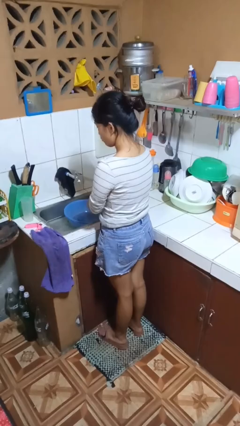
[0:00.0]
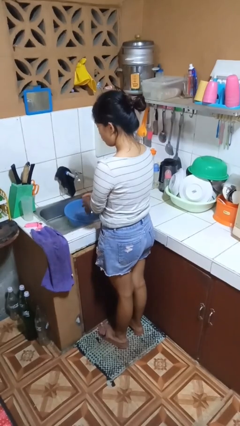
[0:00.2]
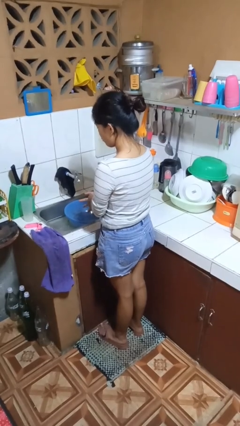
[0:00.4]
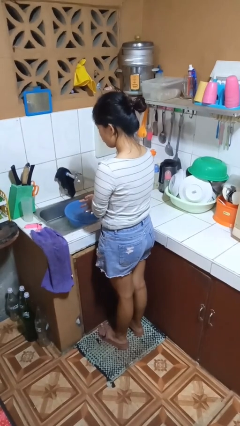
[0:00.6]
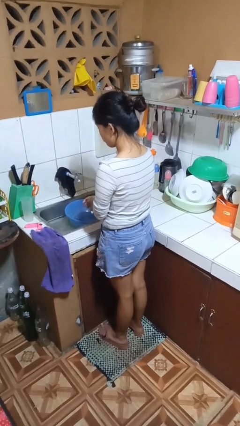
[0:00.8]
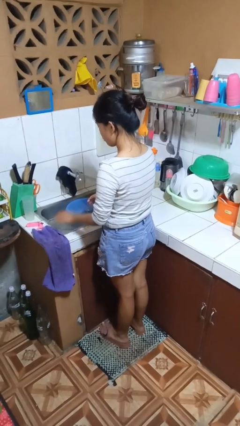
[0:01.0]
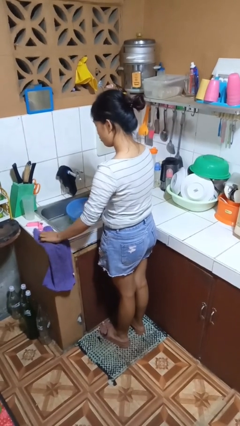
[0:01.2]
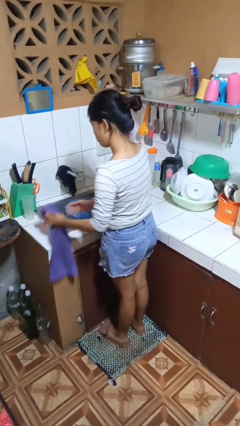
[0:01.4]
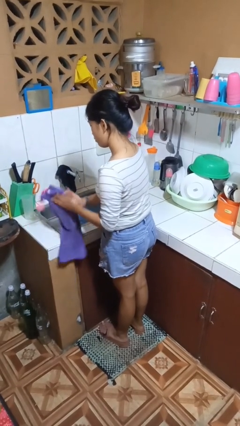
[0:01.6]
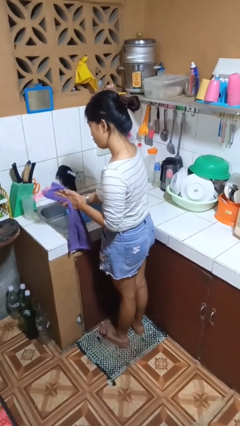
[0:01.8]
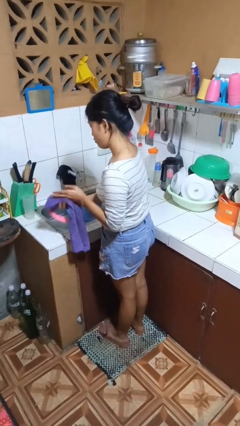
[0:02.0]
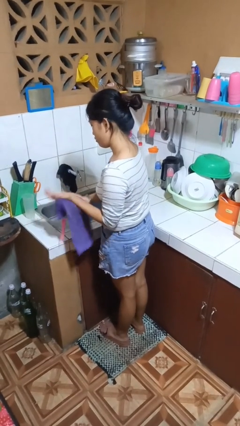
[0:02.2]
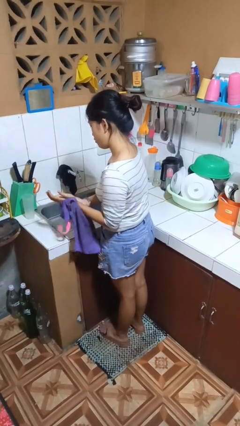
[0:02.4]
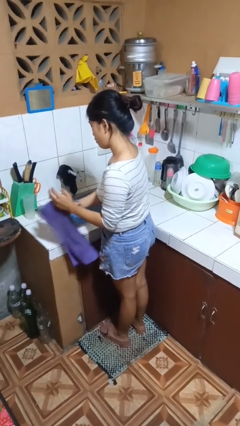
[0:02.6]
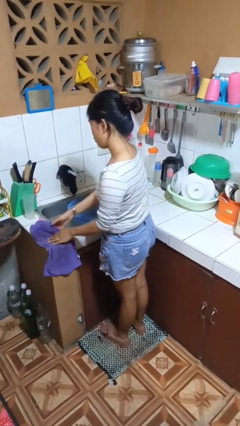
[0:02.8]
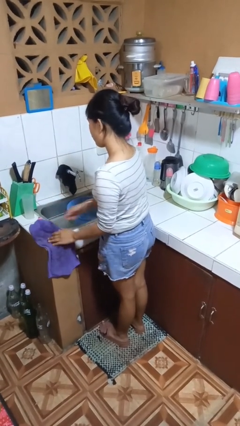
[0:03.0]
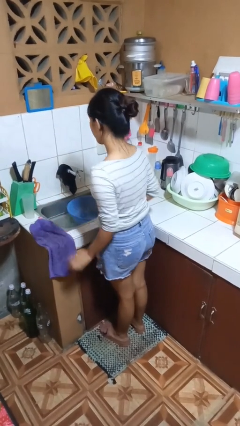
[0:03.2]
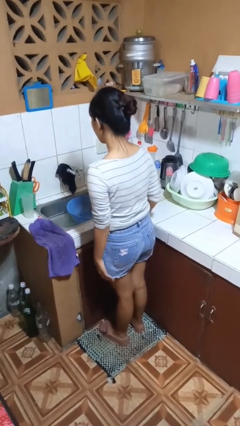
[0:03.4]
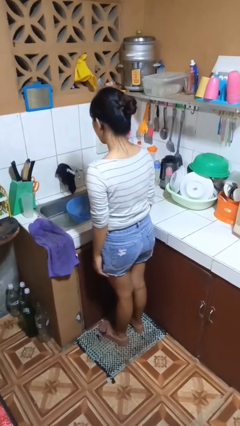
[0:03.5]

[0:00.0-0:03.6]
person dries hands with towel

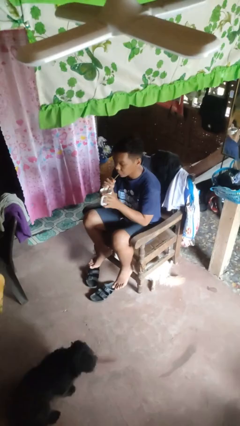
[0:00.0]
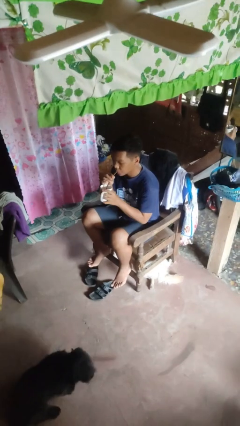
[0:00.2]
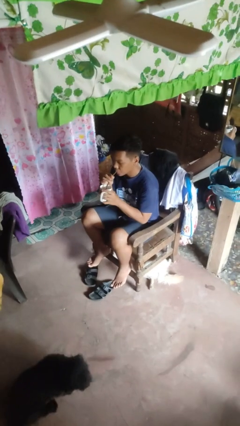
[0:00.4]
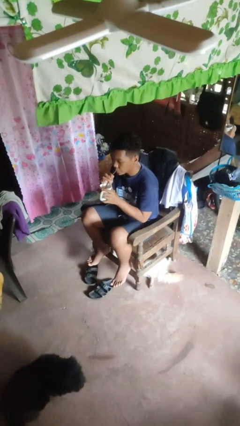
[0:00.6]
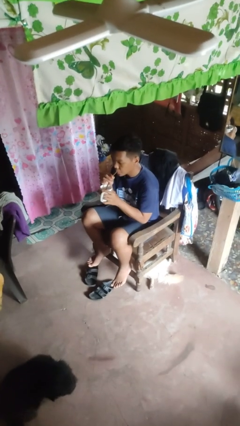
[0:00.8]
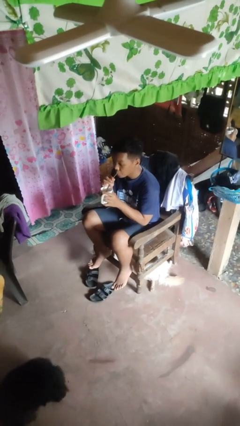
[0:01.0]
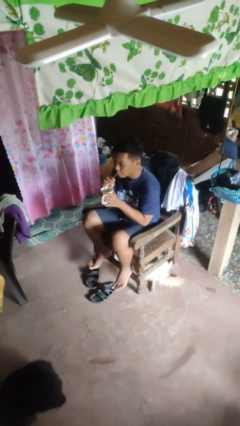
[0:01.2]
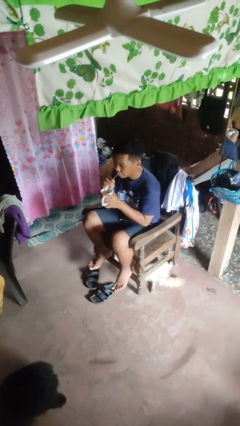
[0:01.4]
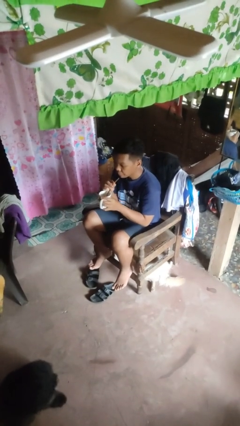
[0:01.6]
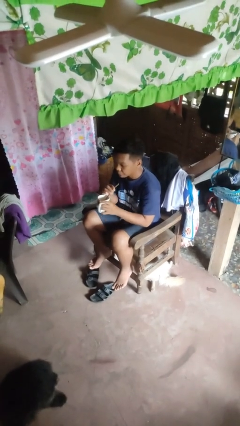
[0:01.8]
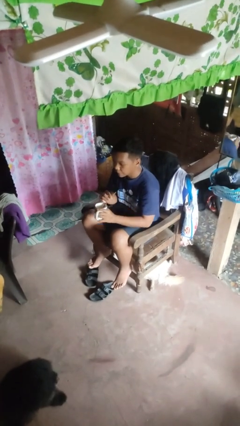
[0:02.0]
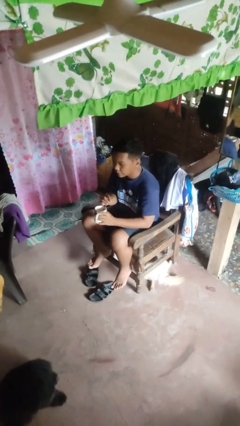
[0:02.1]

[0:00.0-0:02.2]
person drinks from straw

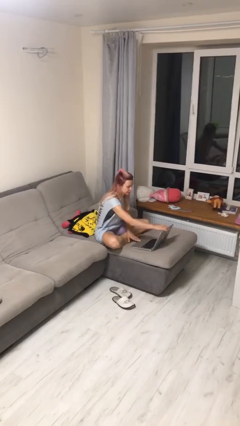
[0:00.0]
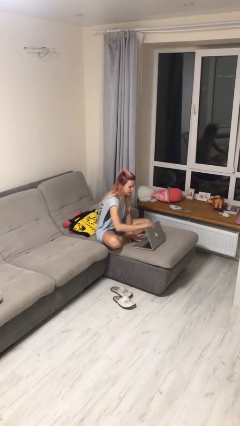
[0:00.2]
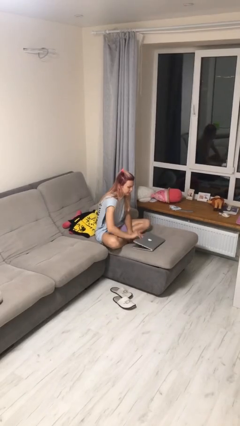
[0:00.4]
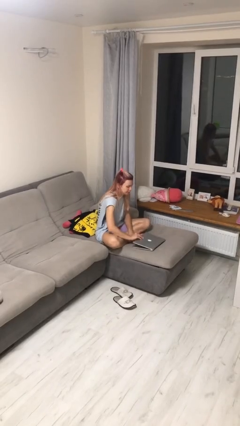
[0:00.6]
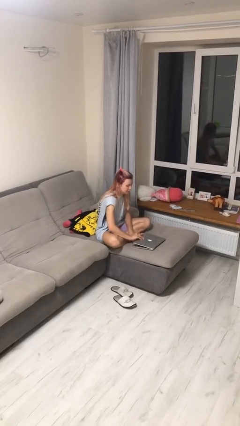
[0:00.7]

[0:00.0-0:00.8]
person closes laptop

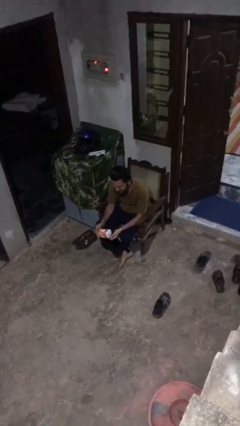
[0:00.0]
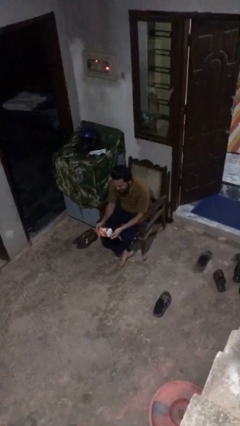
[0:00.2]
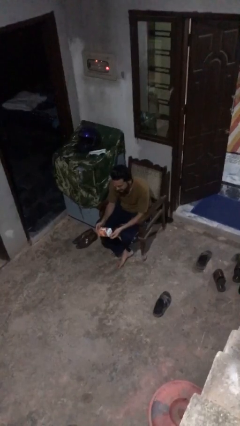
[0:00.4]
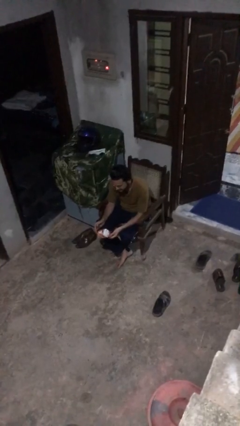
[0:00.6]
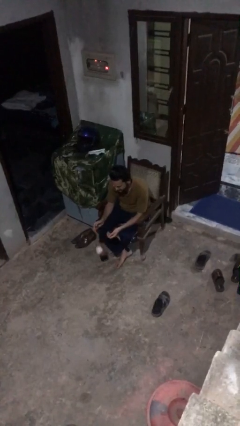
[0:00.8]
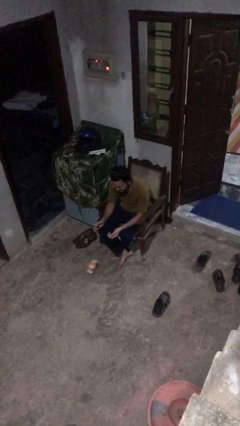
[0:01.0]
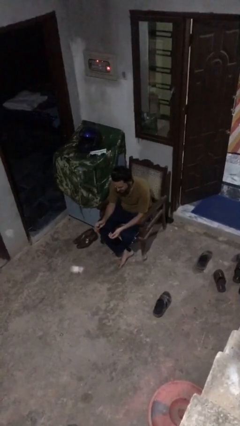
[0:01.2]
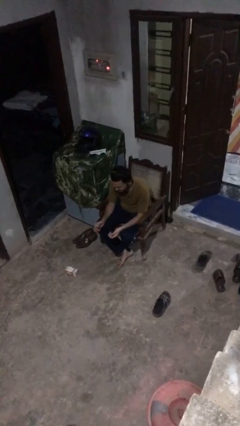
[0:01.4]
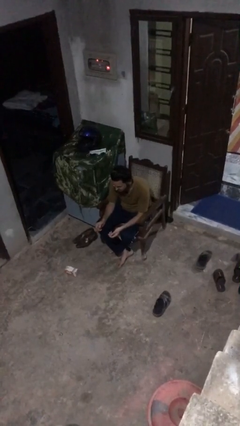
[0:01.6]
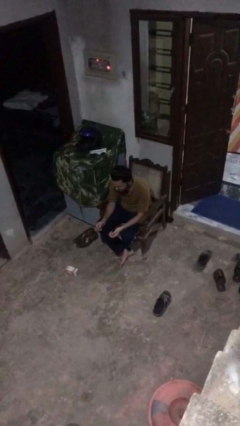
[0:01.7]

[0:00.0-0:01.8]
person drops object

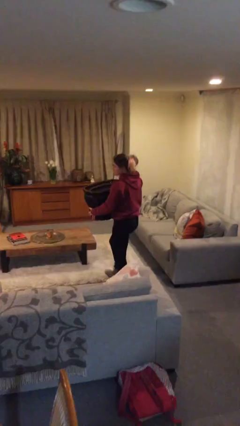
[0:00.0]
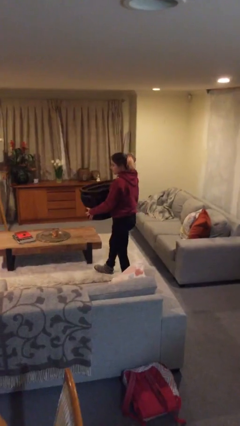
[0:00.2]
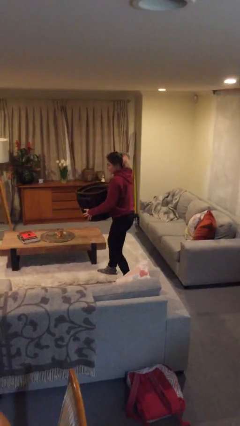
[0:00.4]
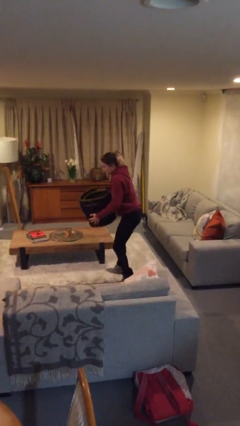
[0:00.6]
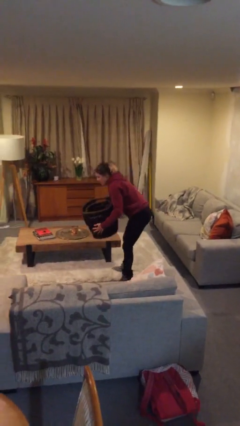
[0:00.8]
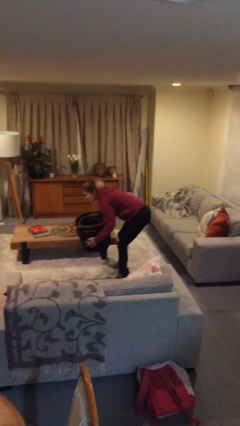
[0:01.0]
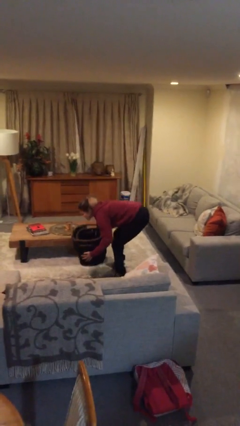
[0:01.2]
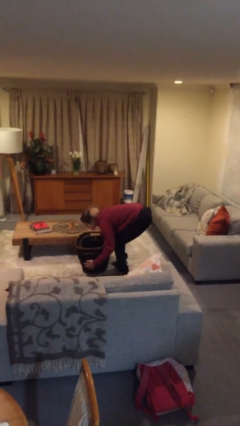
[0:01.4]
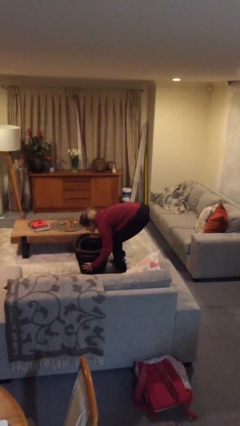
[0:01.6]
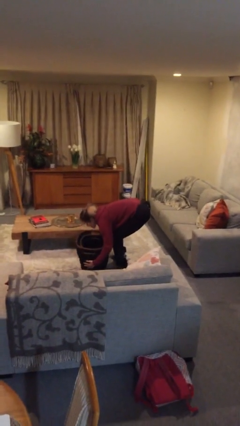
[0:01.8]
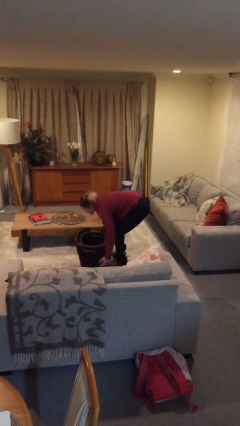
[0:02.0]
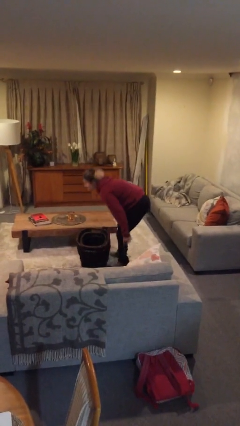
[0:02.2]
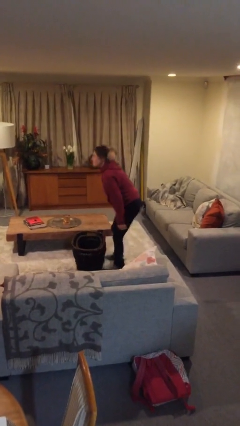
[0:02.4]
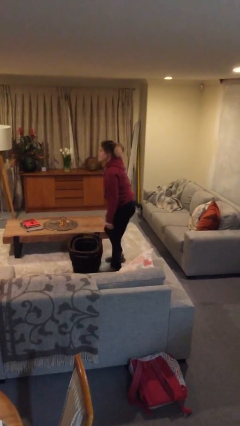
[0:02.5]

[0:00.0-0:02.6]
person puts down object on floor

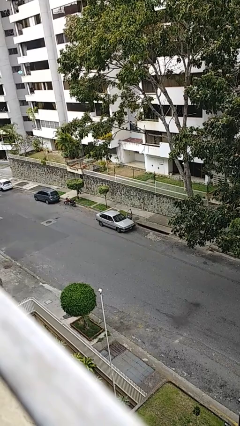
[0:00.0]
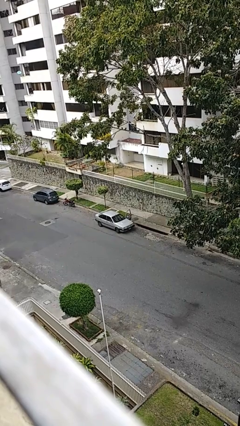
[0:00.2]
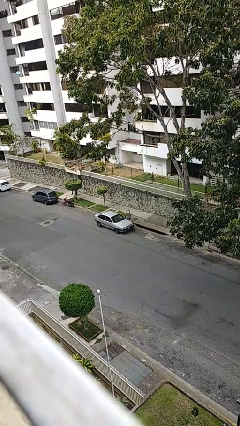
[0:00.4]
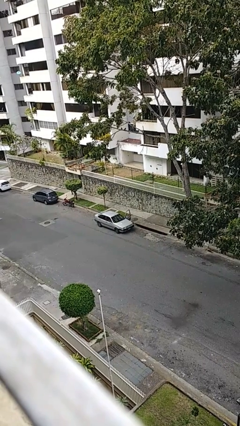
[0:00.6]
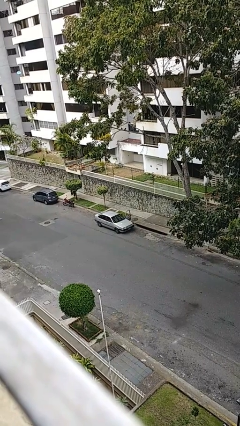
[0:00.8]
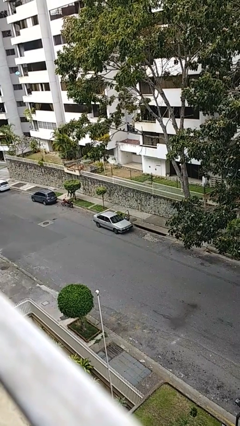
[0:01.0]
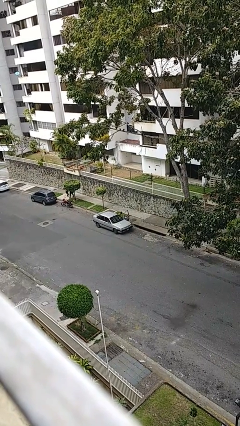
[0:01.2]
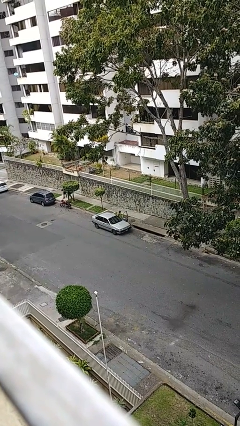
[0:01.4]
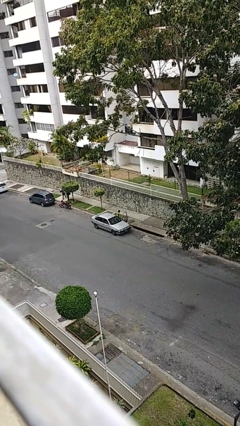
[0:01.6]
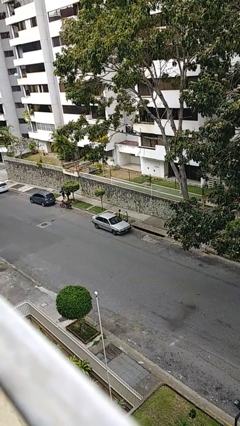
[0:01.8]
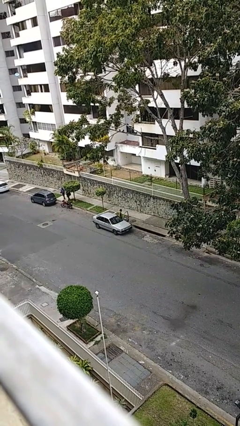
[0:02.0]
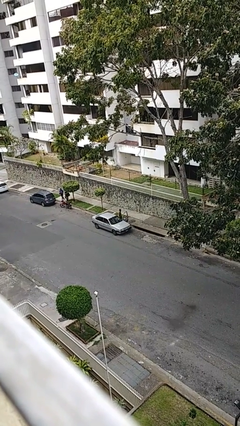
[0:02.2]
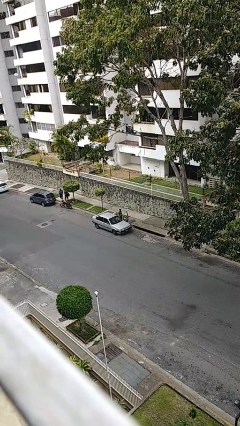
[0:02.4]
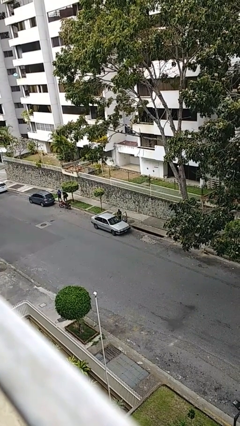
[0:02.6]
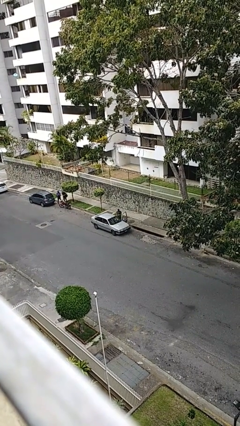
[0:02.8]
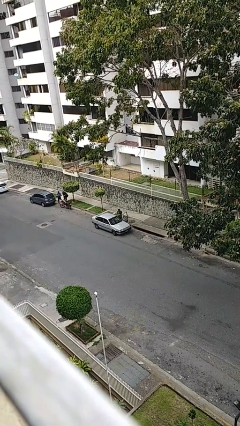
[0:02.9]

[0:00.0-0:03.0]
person exits car

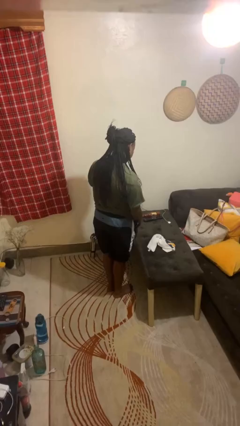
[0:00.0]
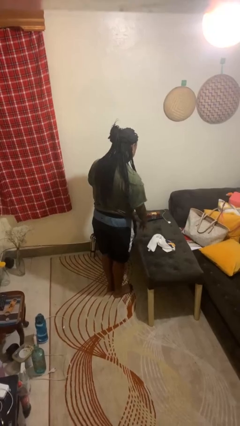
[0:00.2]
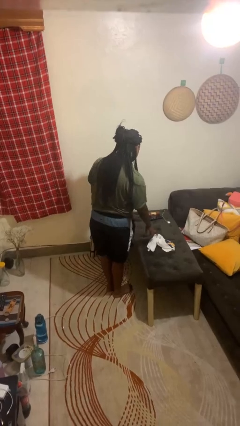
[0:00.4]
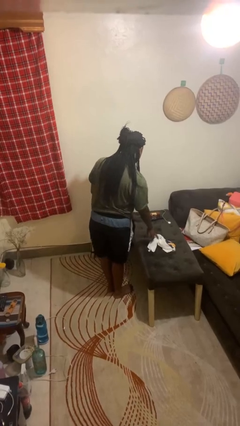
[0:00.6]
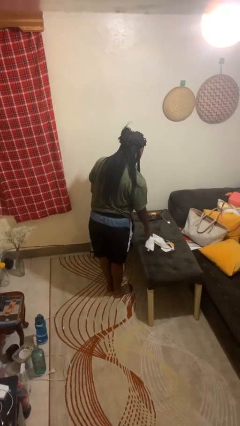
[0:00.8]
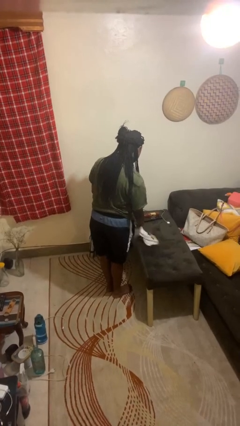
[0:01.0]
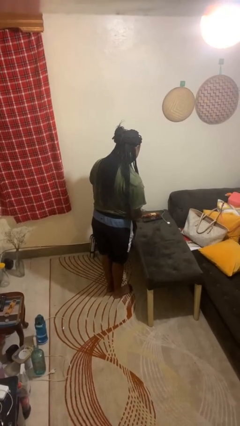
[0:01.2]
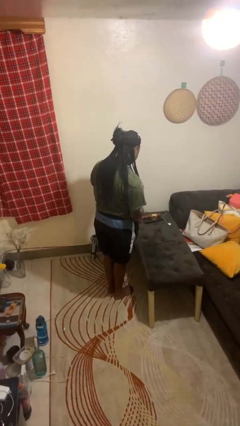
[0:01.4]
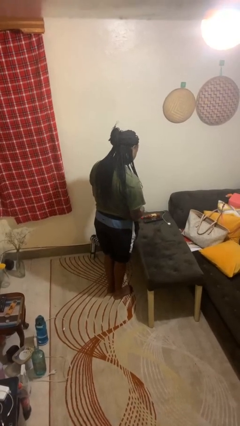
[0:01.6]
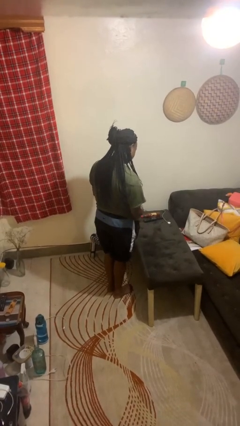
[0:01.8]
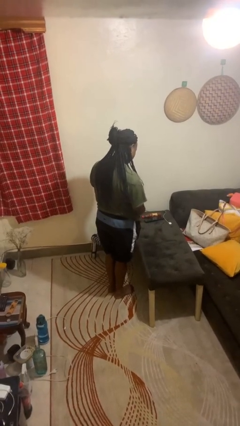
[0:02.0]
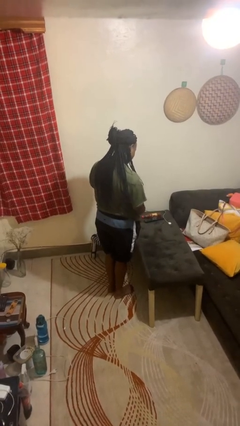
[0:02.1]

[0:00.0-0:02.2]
person picks up object from table

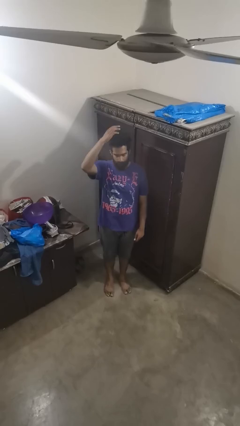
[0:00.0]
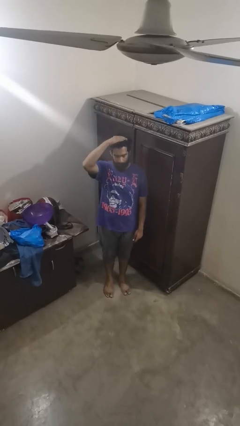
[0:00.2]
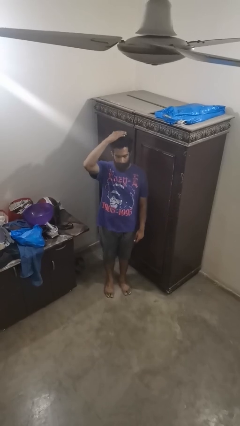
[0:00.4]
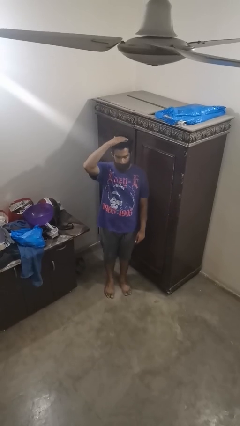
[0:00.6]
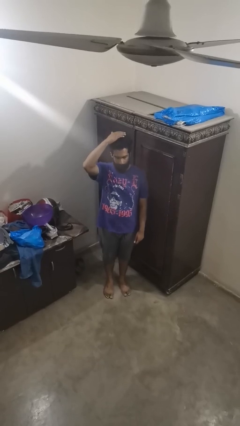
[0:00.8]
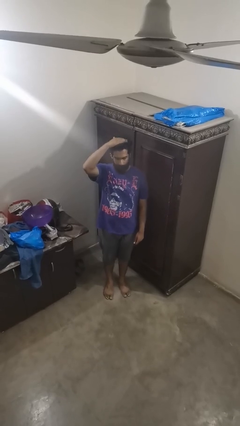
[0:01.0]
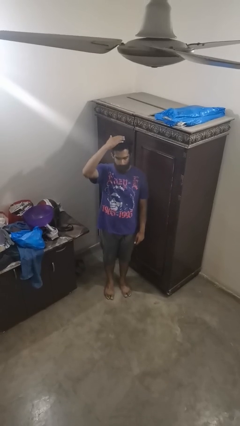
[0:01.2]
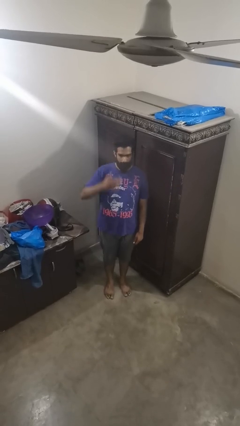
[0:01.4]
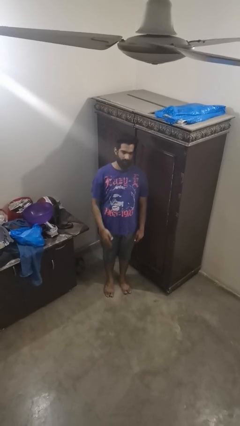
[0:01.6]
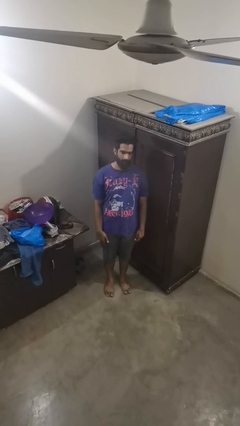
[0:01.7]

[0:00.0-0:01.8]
person pats head
